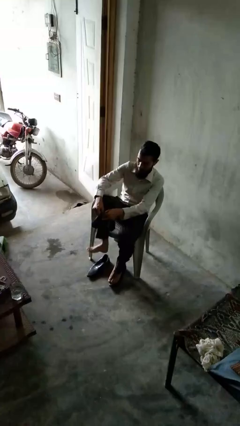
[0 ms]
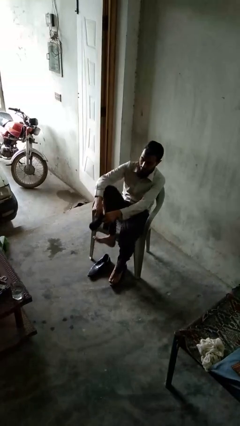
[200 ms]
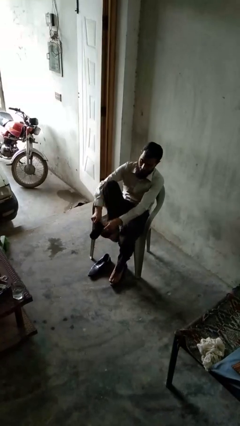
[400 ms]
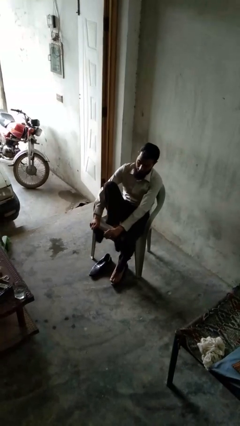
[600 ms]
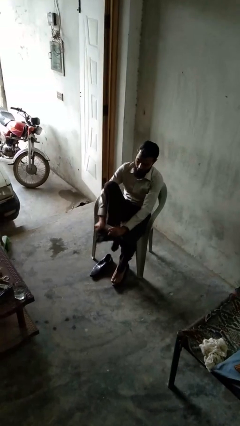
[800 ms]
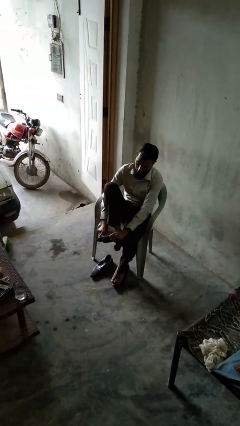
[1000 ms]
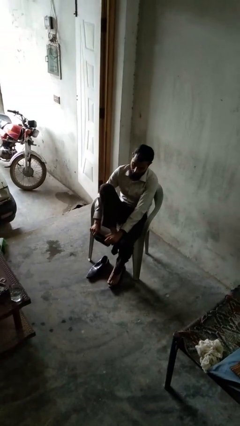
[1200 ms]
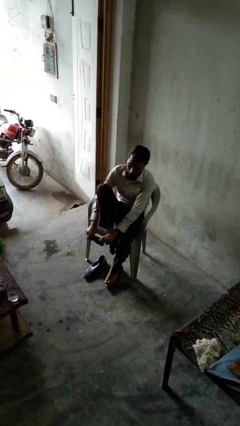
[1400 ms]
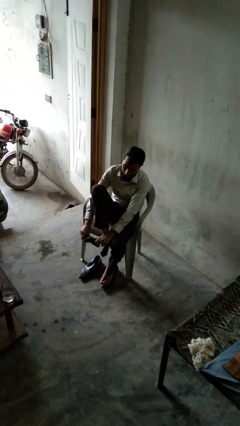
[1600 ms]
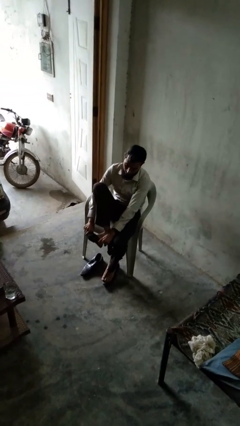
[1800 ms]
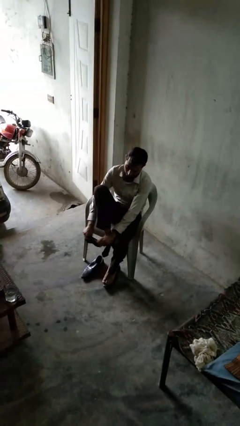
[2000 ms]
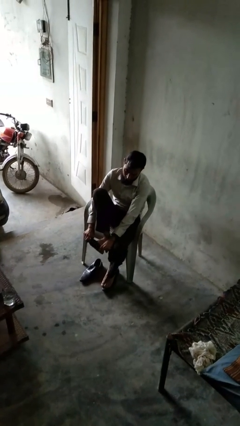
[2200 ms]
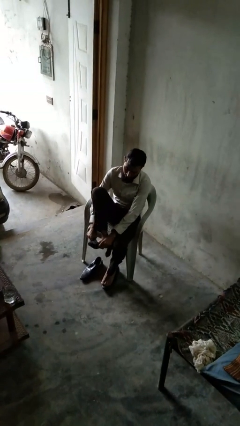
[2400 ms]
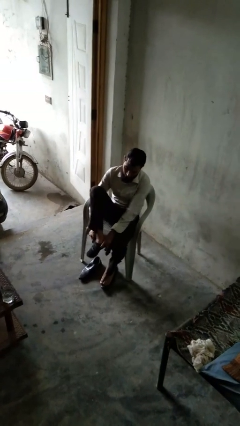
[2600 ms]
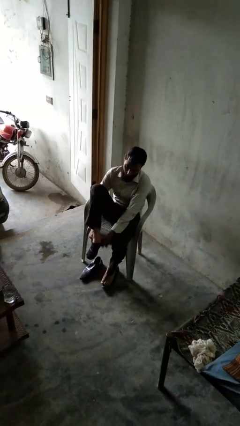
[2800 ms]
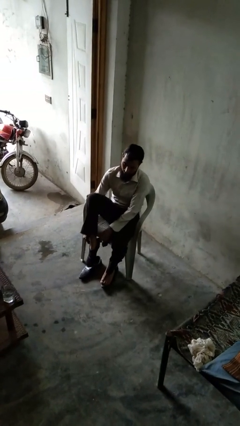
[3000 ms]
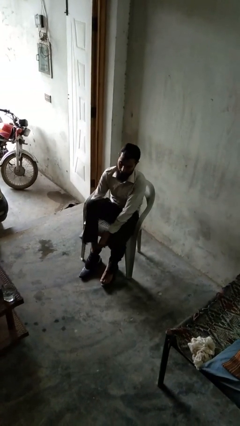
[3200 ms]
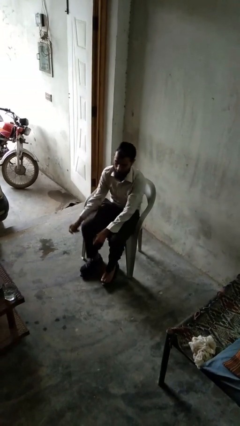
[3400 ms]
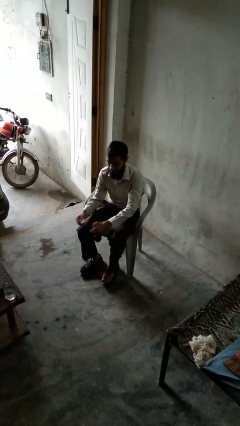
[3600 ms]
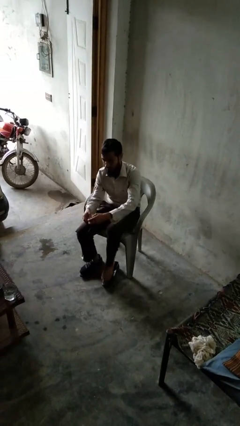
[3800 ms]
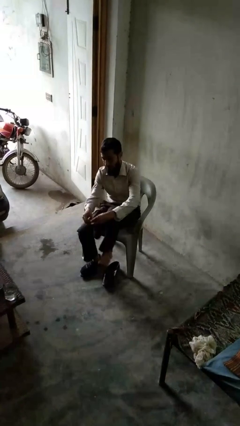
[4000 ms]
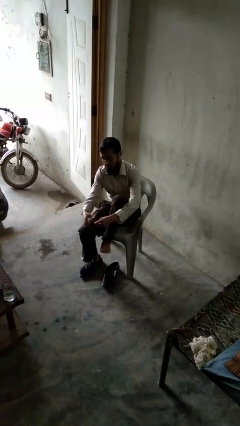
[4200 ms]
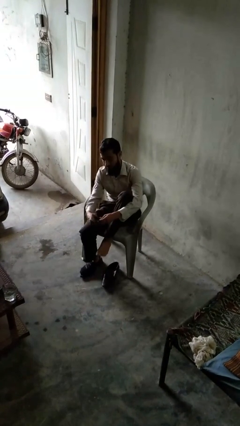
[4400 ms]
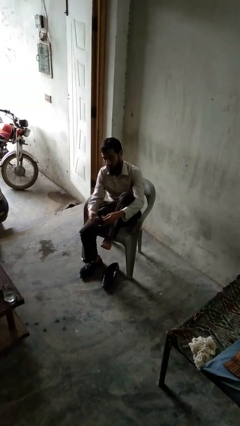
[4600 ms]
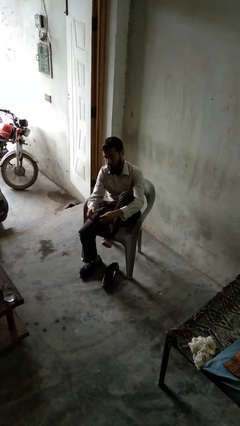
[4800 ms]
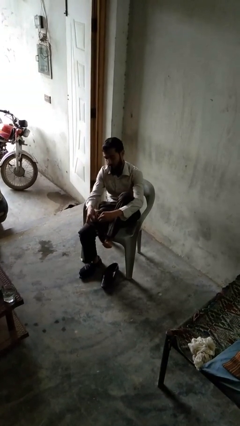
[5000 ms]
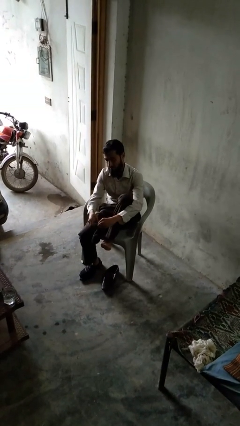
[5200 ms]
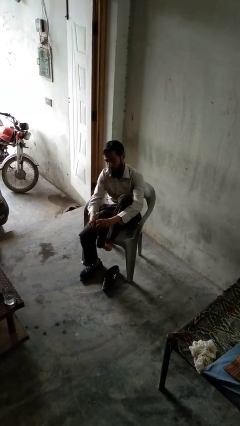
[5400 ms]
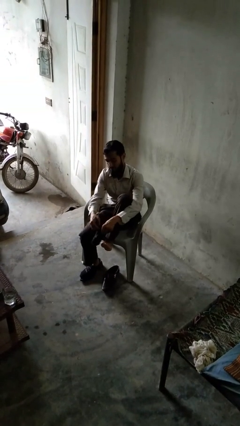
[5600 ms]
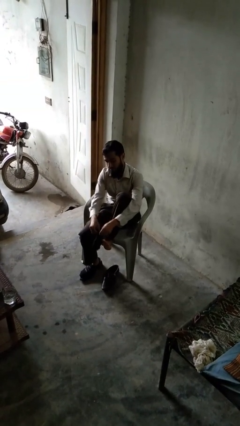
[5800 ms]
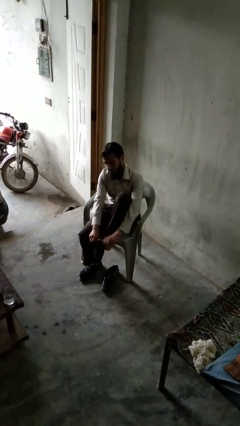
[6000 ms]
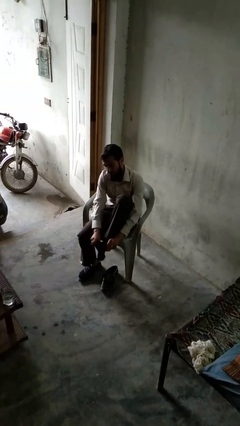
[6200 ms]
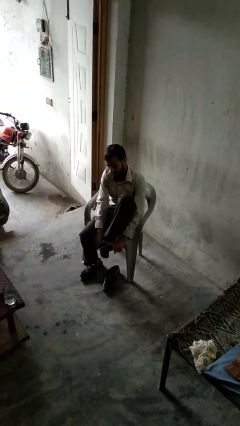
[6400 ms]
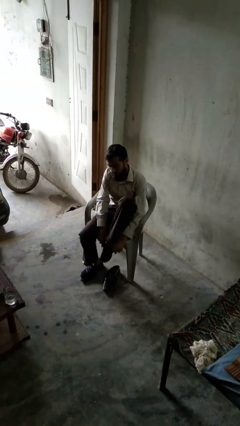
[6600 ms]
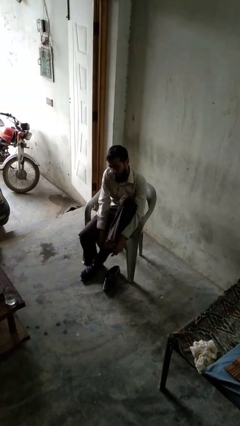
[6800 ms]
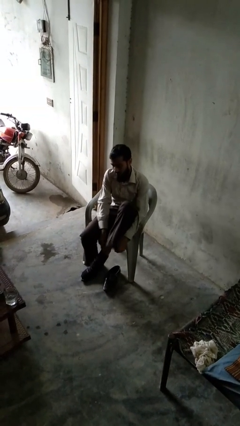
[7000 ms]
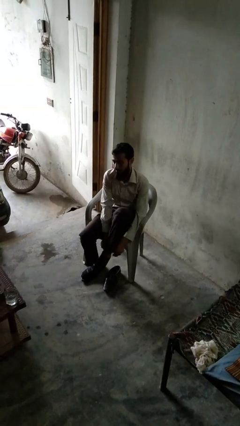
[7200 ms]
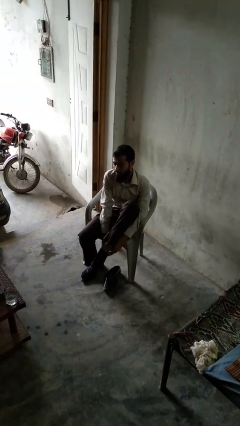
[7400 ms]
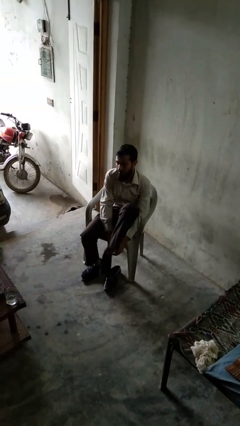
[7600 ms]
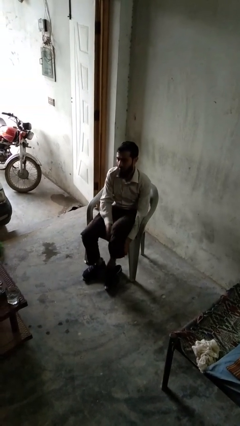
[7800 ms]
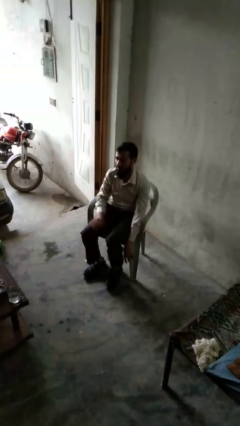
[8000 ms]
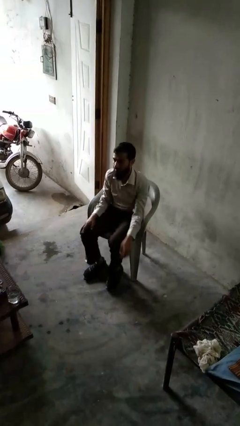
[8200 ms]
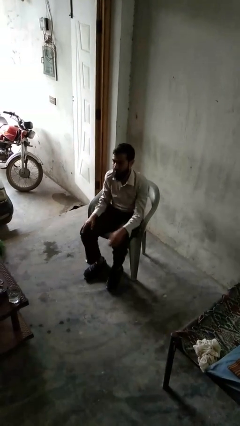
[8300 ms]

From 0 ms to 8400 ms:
person puts on socks

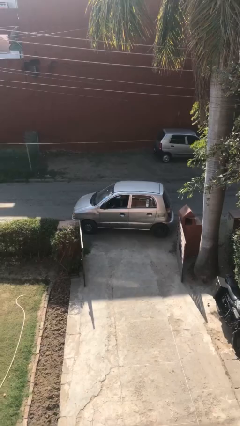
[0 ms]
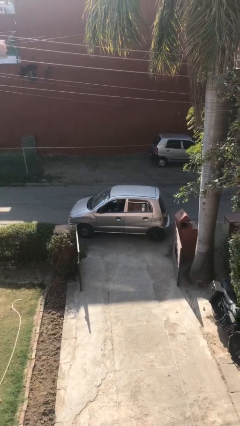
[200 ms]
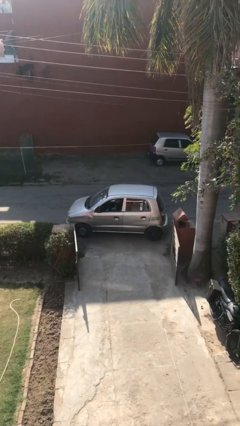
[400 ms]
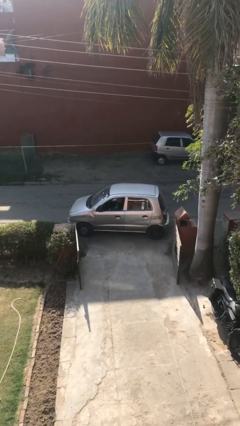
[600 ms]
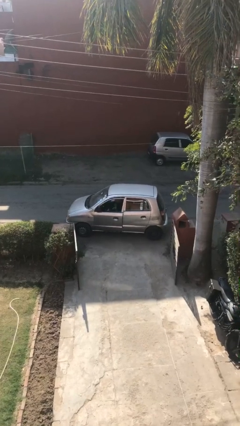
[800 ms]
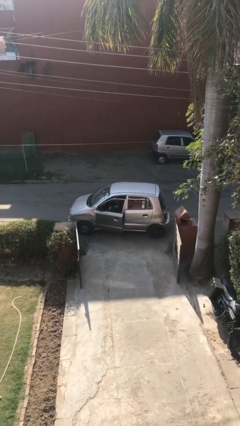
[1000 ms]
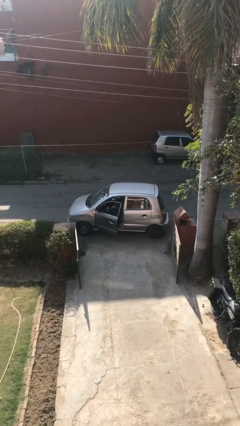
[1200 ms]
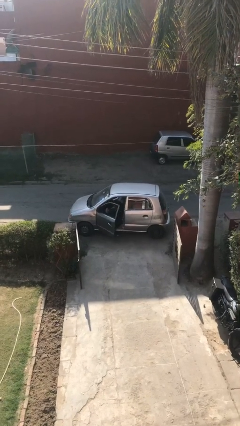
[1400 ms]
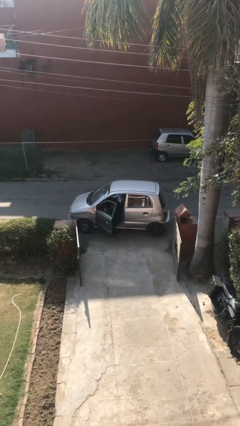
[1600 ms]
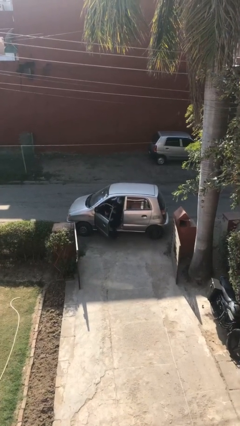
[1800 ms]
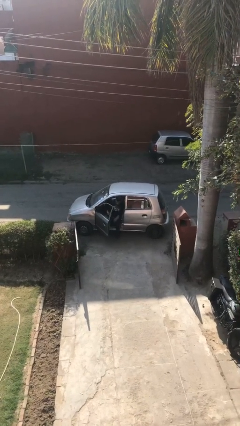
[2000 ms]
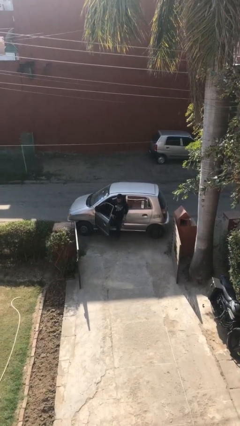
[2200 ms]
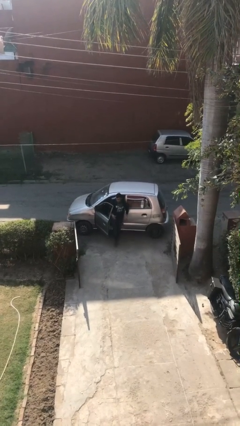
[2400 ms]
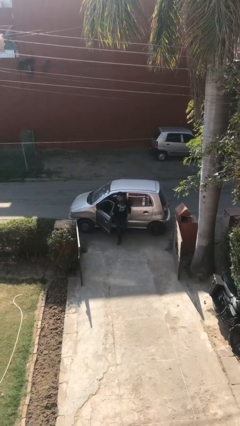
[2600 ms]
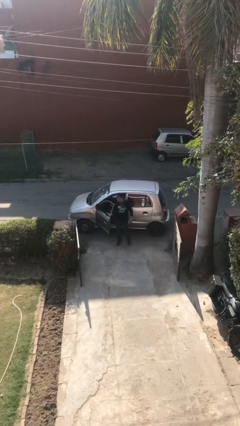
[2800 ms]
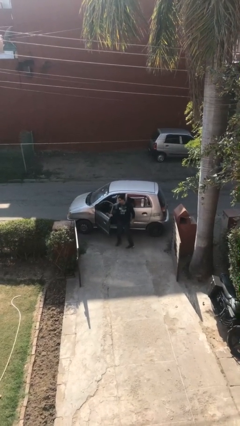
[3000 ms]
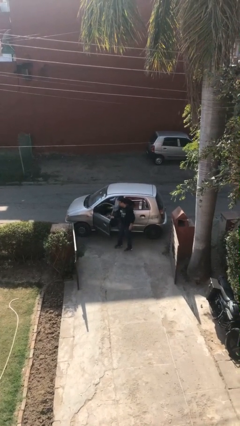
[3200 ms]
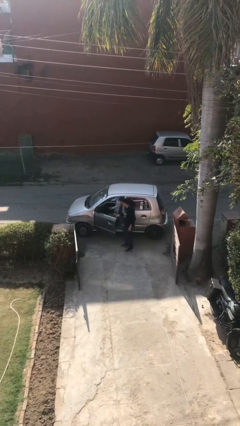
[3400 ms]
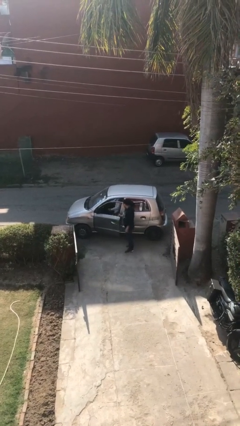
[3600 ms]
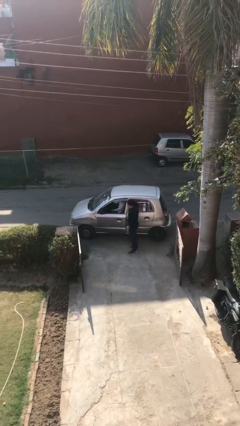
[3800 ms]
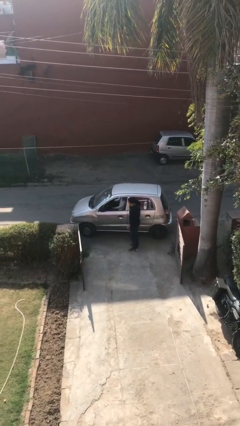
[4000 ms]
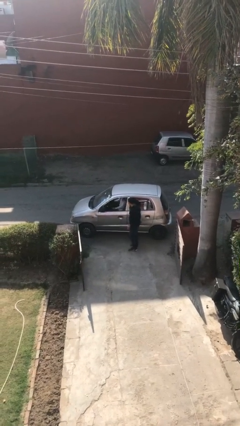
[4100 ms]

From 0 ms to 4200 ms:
car drops off person

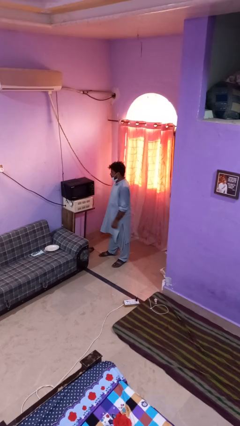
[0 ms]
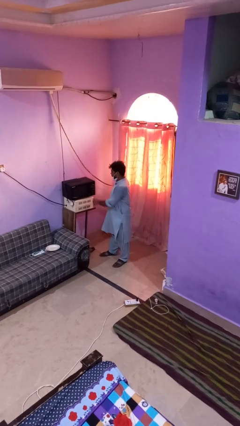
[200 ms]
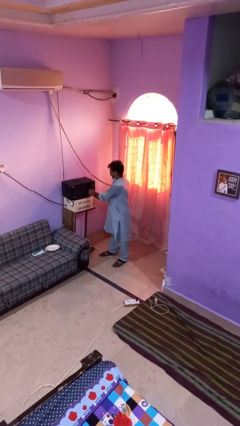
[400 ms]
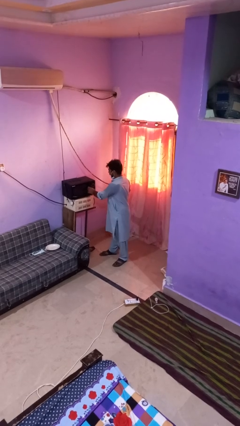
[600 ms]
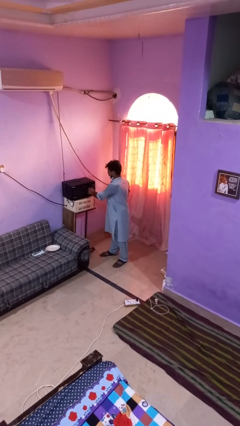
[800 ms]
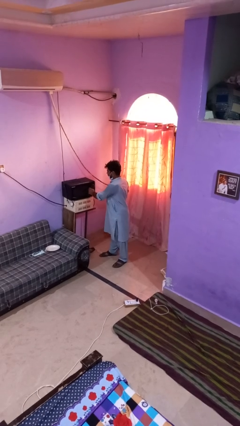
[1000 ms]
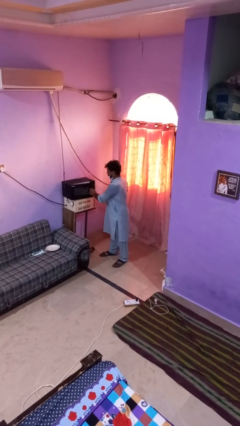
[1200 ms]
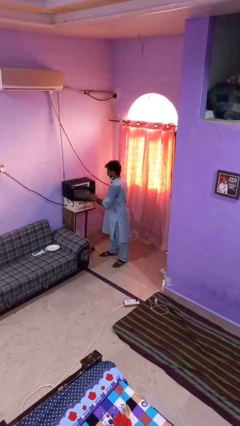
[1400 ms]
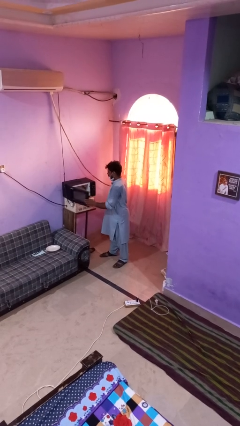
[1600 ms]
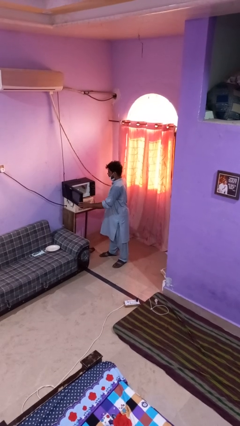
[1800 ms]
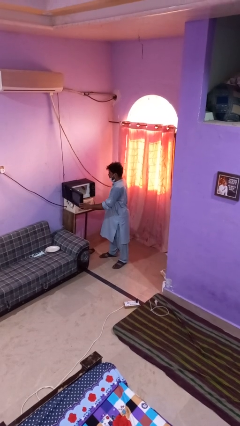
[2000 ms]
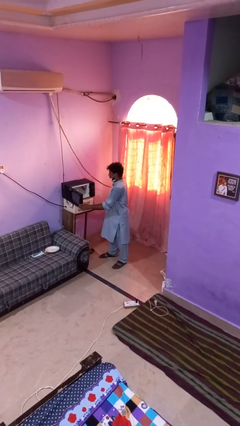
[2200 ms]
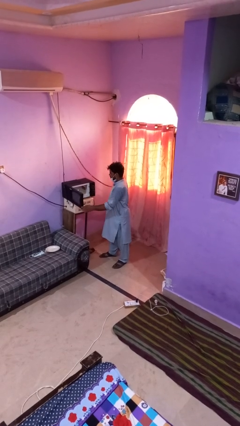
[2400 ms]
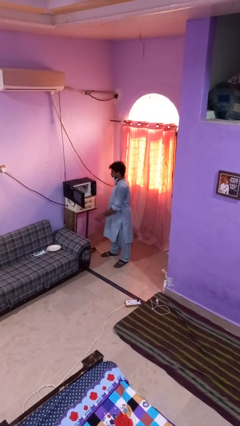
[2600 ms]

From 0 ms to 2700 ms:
person opens oven door

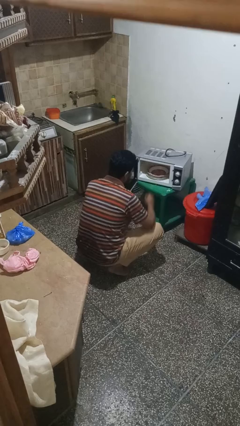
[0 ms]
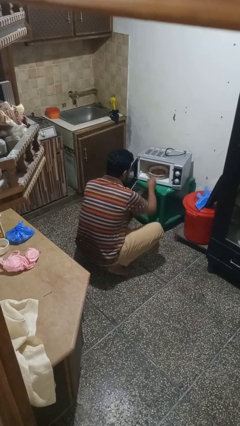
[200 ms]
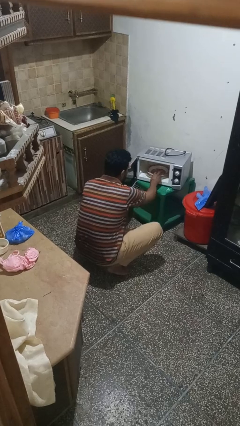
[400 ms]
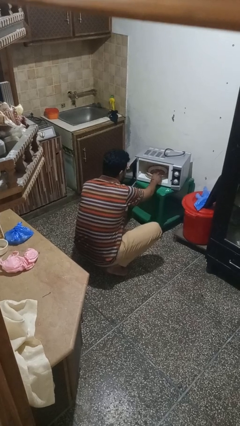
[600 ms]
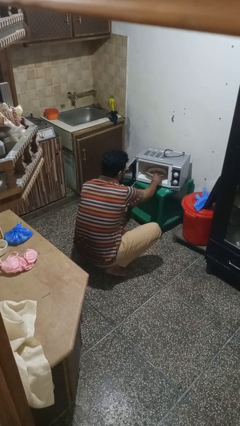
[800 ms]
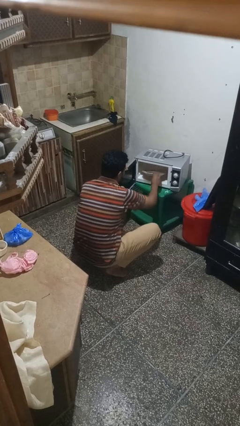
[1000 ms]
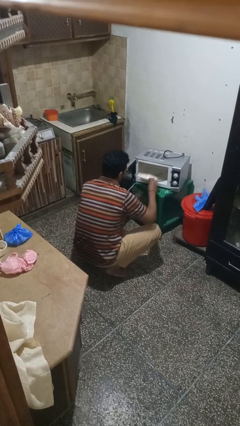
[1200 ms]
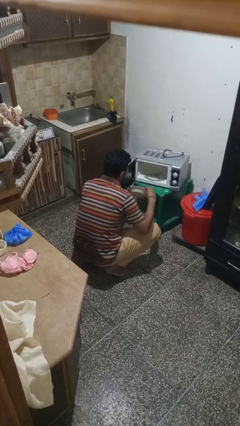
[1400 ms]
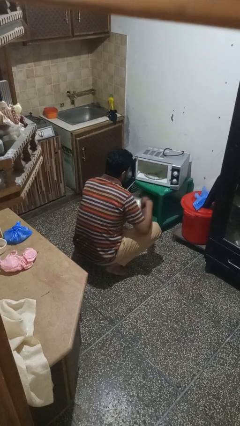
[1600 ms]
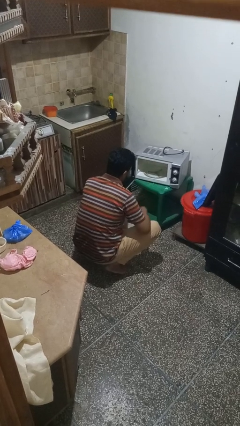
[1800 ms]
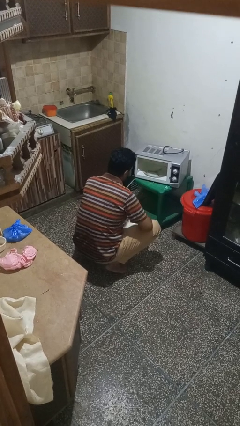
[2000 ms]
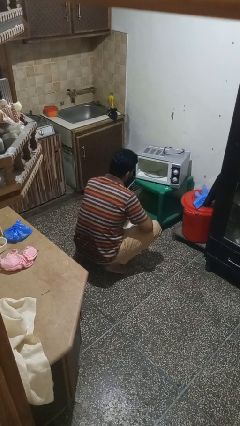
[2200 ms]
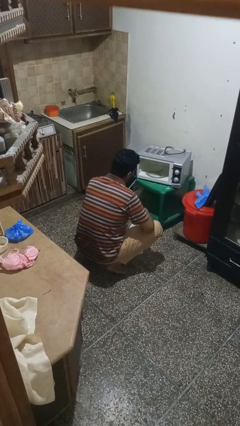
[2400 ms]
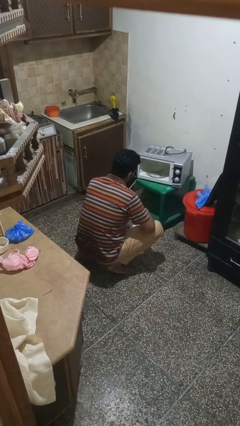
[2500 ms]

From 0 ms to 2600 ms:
person takes object from microwave

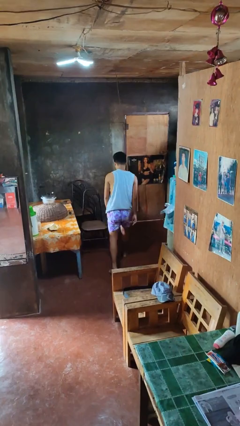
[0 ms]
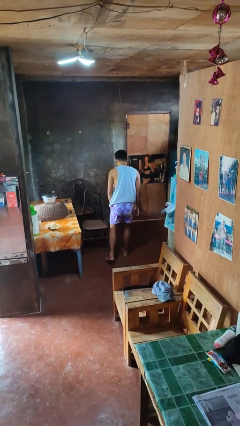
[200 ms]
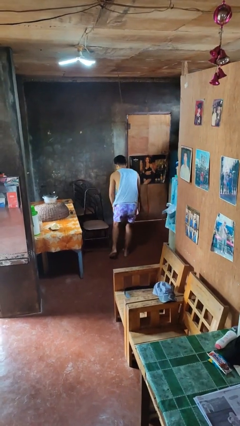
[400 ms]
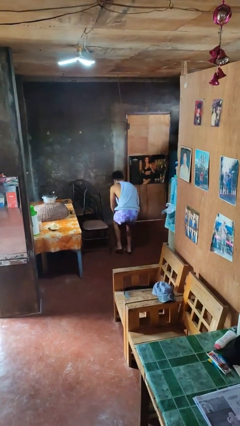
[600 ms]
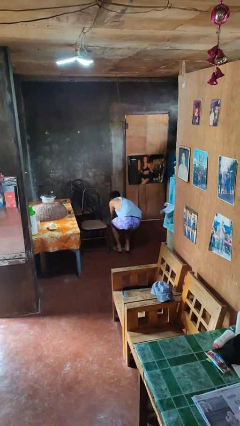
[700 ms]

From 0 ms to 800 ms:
person trips on object on floor
